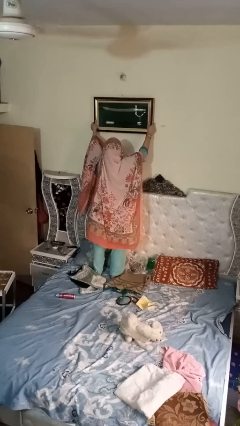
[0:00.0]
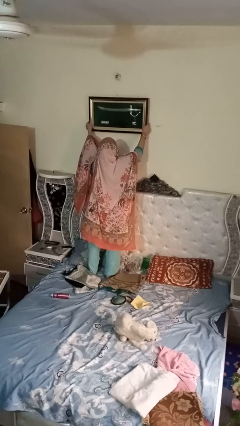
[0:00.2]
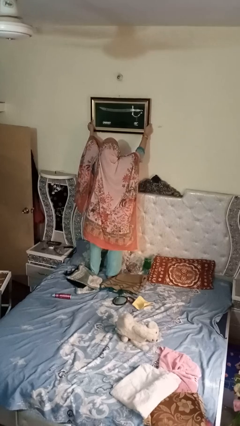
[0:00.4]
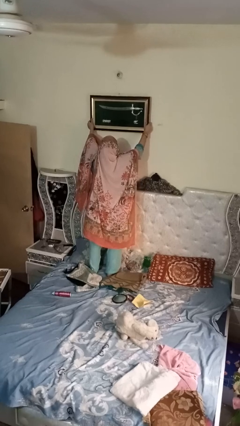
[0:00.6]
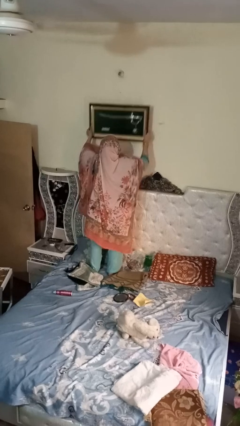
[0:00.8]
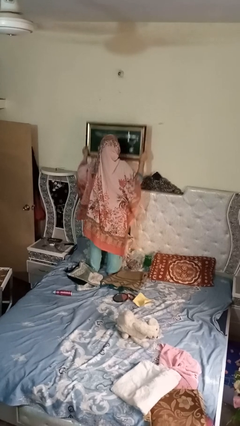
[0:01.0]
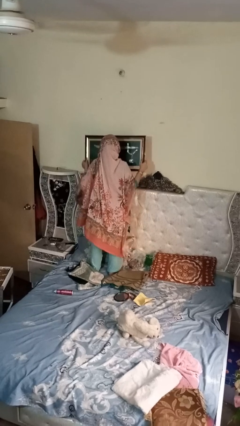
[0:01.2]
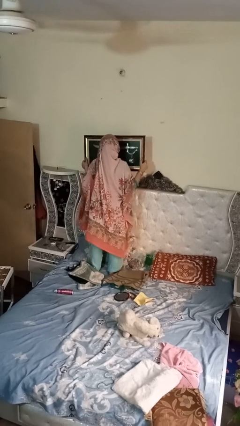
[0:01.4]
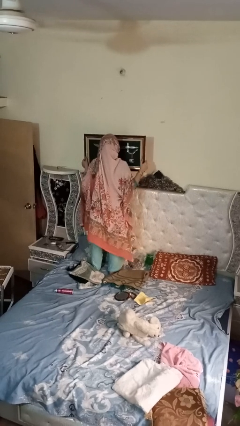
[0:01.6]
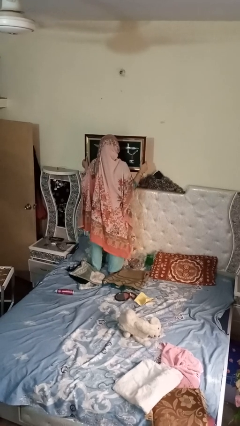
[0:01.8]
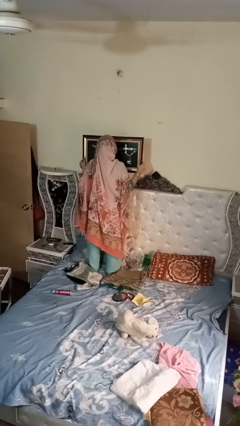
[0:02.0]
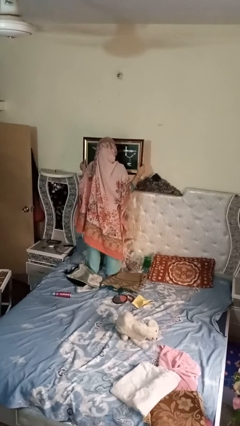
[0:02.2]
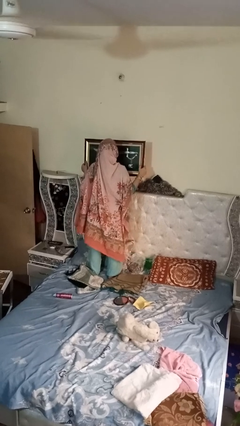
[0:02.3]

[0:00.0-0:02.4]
person puts up picture frame

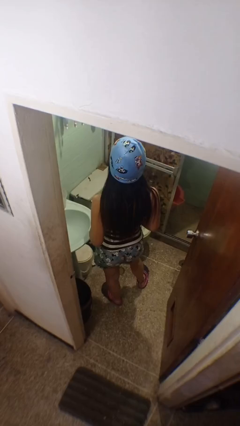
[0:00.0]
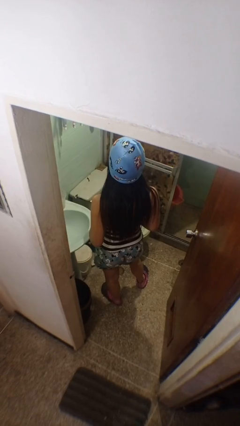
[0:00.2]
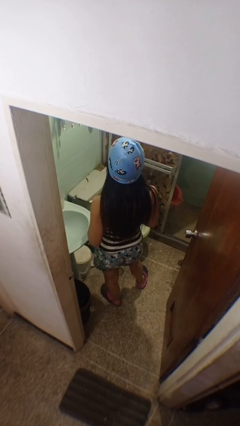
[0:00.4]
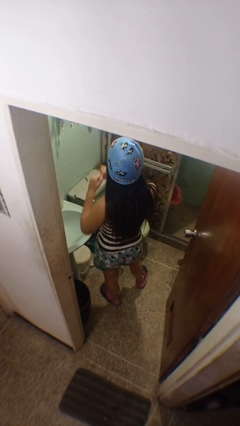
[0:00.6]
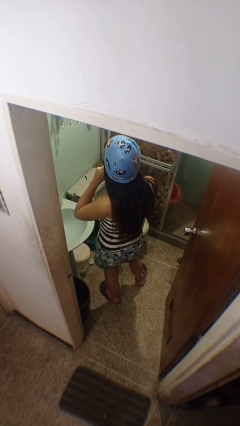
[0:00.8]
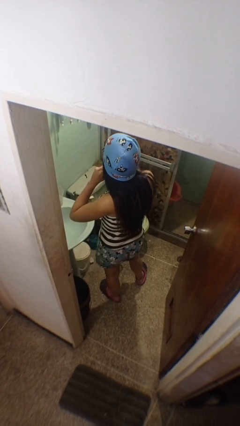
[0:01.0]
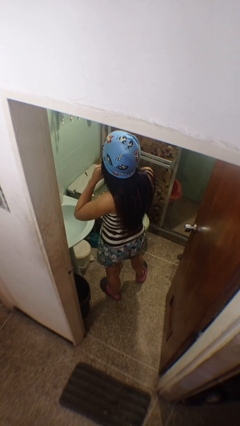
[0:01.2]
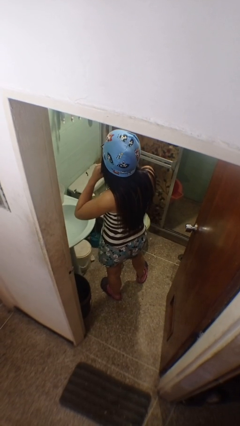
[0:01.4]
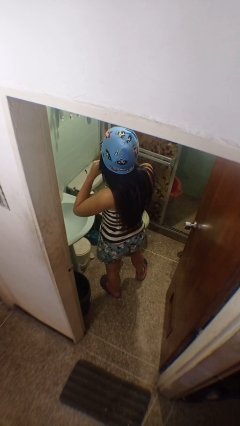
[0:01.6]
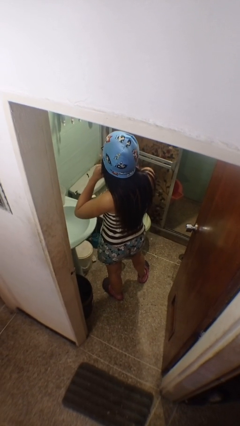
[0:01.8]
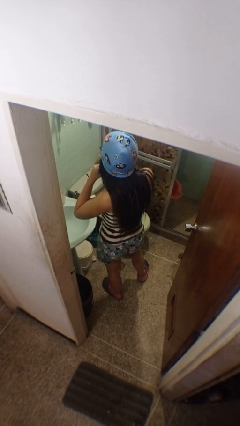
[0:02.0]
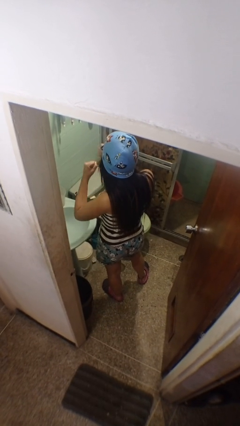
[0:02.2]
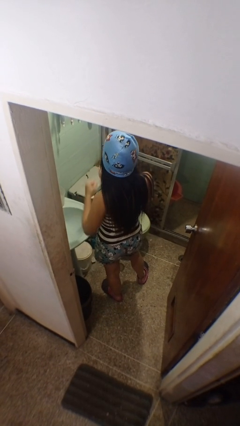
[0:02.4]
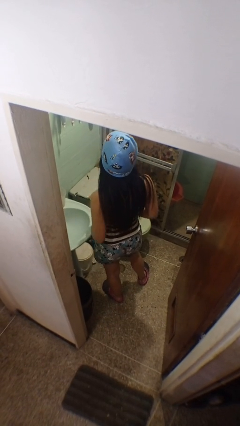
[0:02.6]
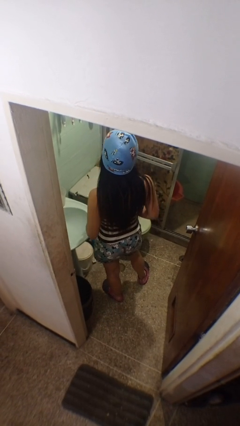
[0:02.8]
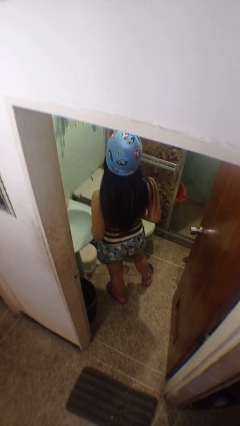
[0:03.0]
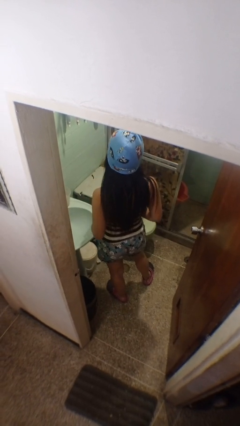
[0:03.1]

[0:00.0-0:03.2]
person flosses

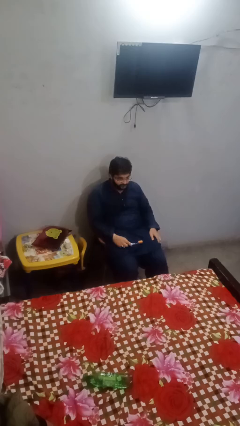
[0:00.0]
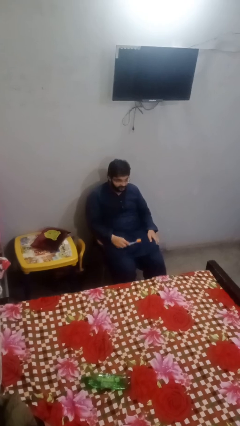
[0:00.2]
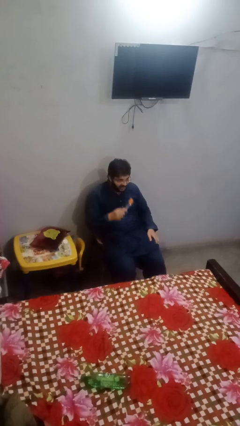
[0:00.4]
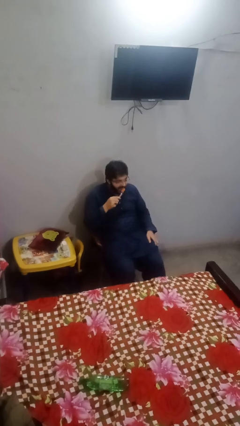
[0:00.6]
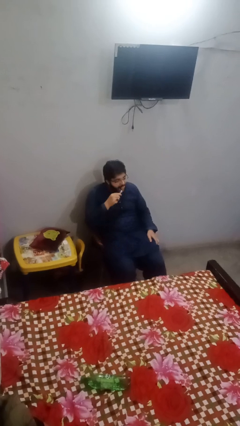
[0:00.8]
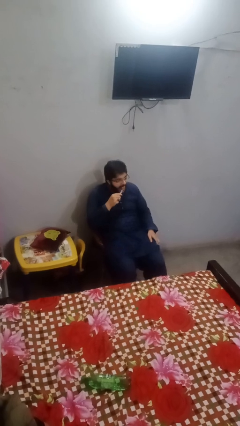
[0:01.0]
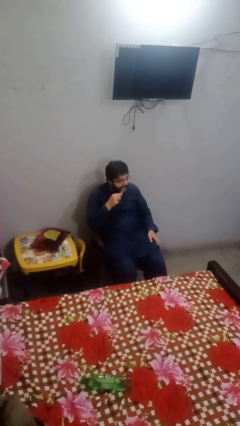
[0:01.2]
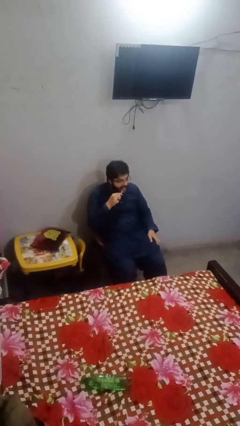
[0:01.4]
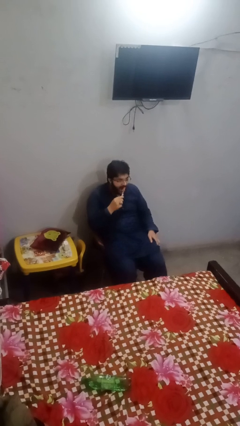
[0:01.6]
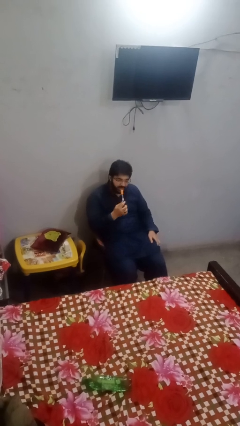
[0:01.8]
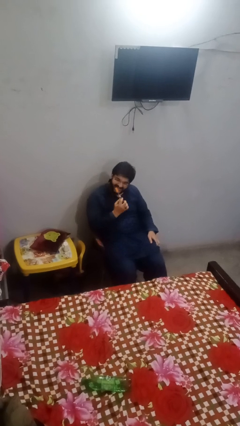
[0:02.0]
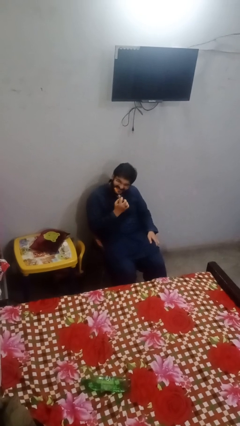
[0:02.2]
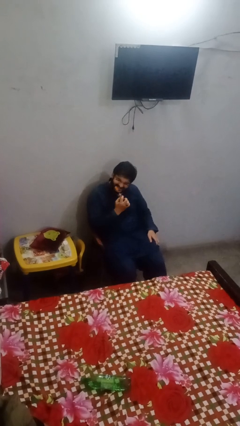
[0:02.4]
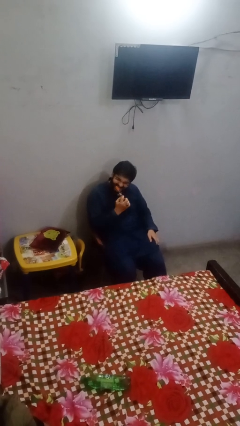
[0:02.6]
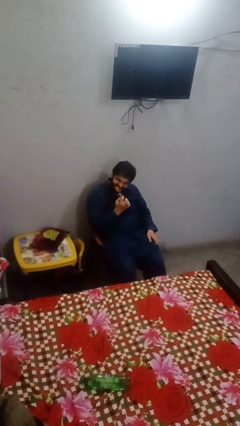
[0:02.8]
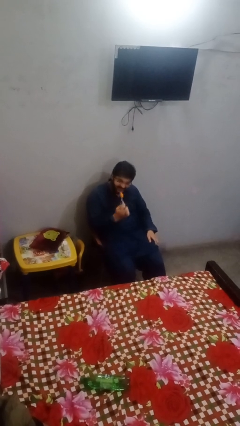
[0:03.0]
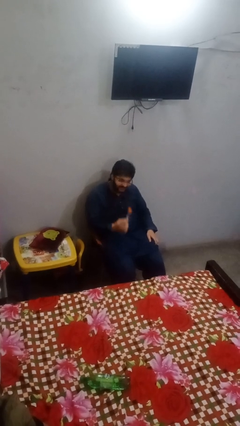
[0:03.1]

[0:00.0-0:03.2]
person brushes teeth

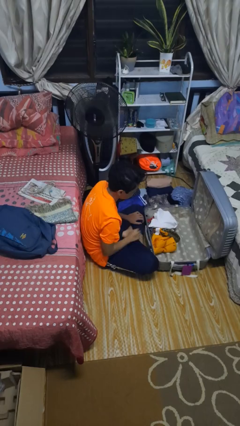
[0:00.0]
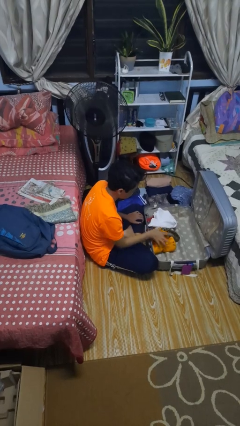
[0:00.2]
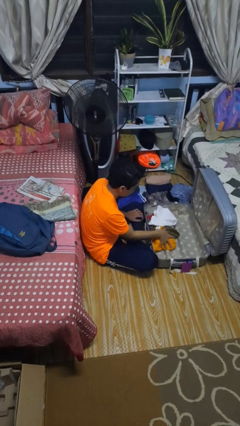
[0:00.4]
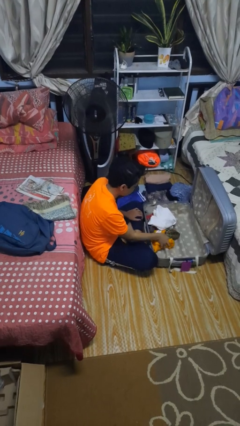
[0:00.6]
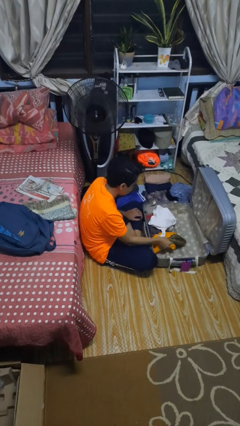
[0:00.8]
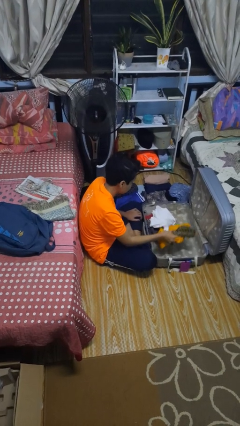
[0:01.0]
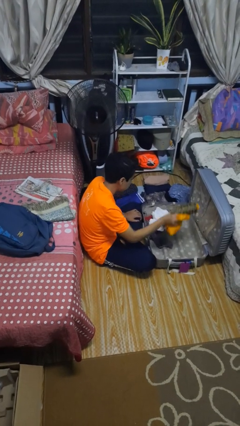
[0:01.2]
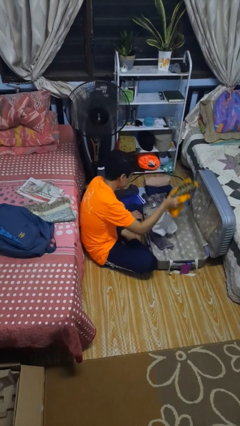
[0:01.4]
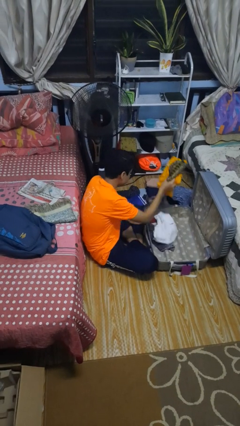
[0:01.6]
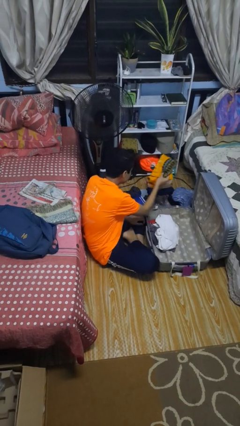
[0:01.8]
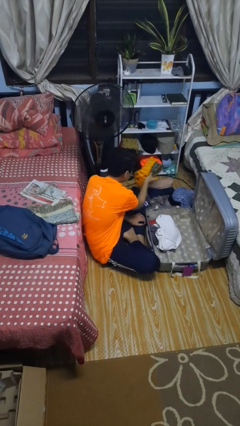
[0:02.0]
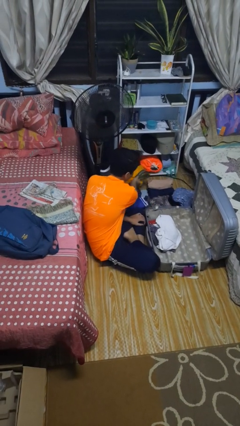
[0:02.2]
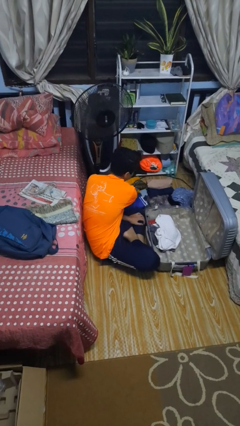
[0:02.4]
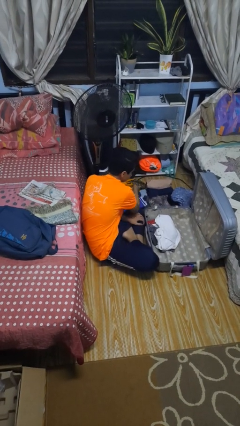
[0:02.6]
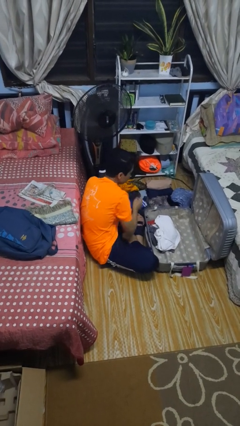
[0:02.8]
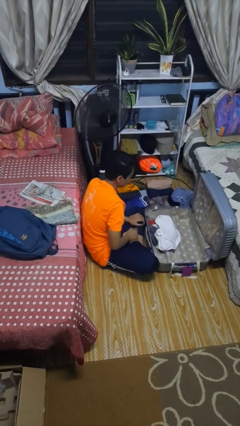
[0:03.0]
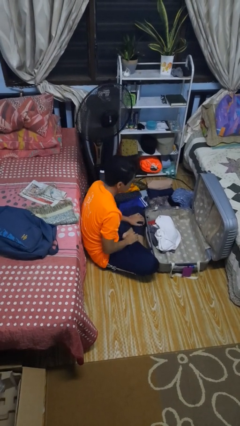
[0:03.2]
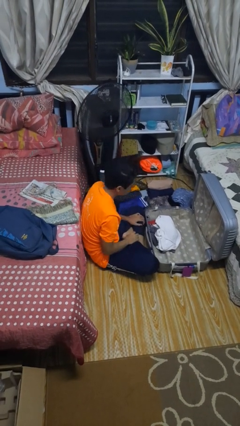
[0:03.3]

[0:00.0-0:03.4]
person unloads clothes from suitcase

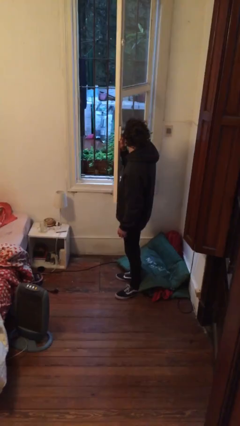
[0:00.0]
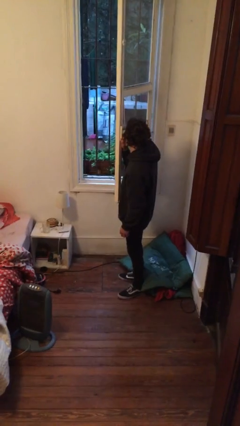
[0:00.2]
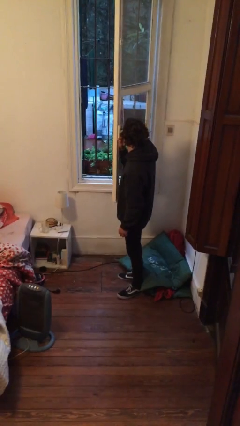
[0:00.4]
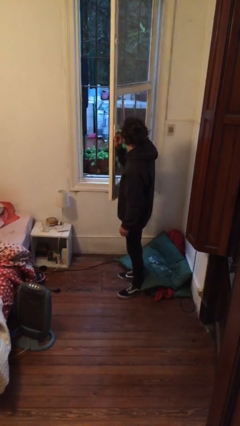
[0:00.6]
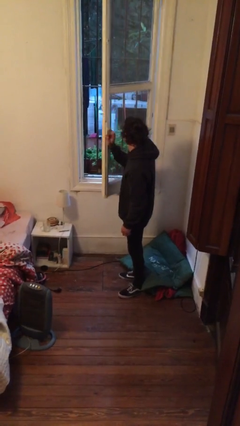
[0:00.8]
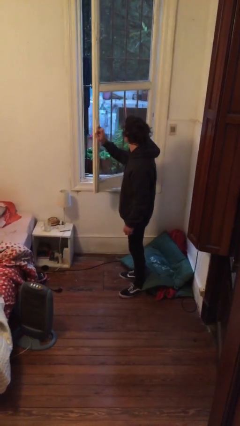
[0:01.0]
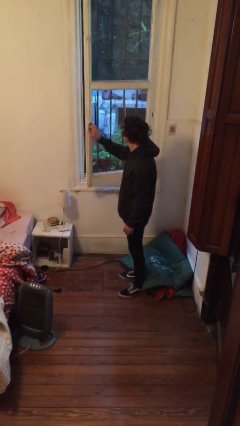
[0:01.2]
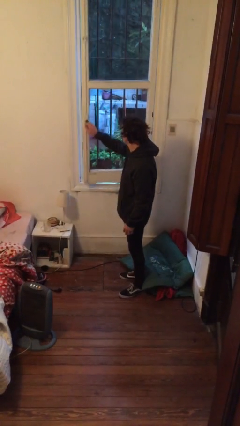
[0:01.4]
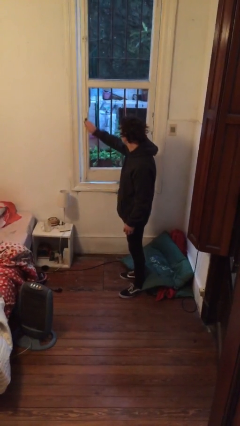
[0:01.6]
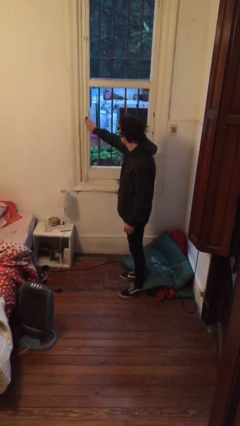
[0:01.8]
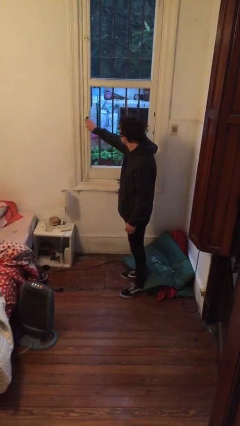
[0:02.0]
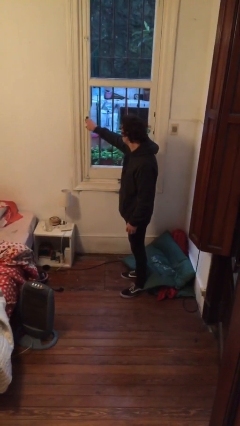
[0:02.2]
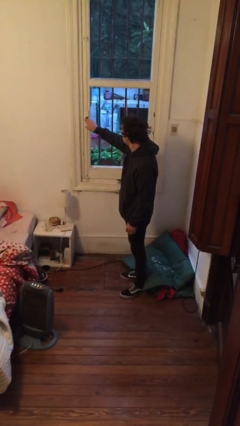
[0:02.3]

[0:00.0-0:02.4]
person closes home window

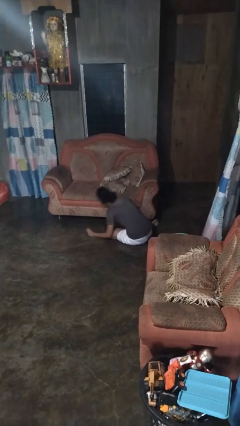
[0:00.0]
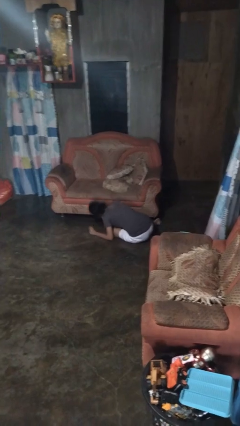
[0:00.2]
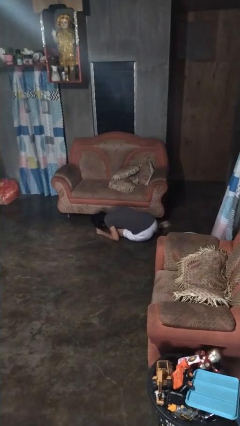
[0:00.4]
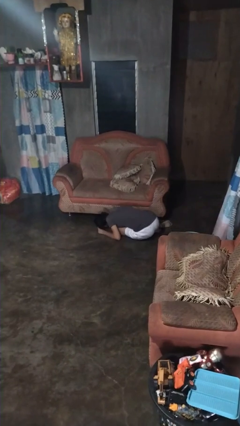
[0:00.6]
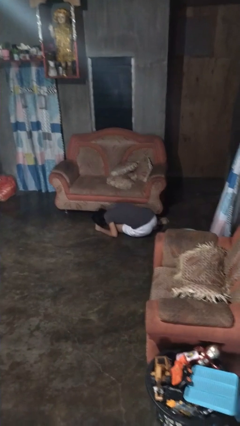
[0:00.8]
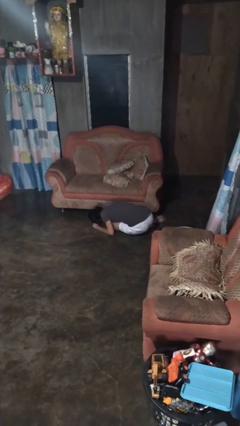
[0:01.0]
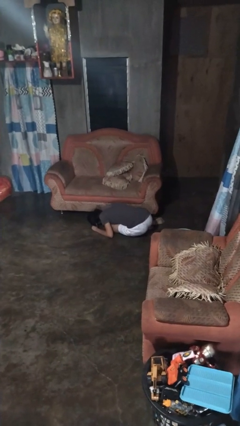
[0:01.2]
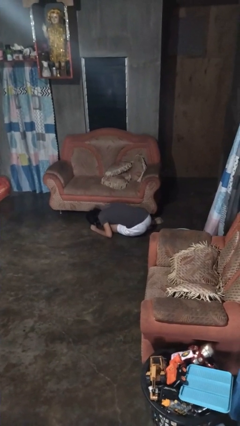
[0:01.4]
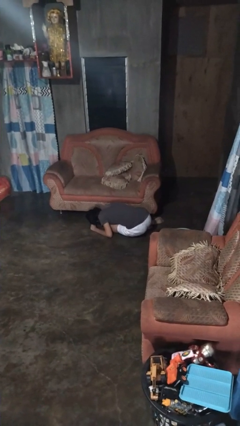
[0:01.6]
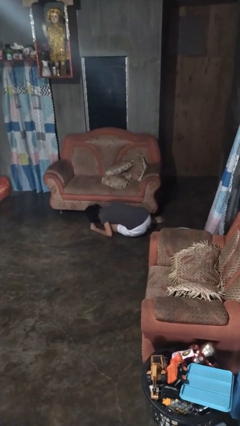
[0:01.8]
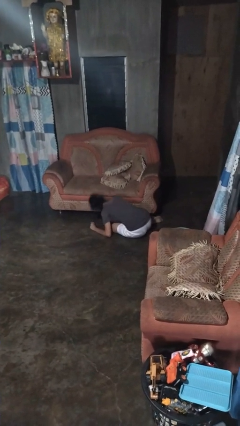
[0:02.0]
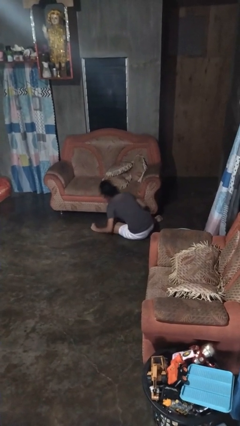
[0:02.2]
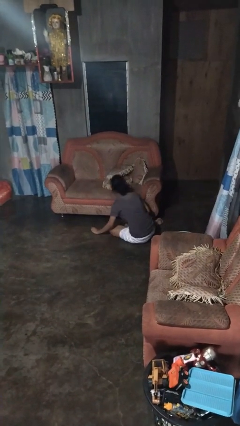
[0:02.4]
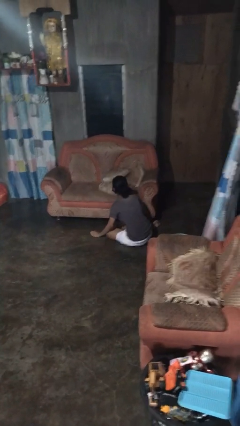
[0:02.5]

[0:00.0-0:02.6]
person searches under couch
